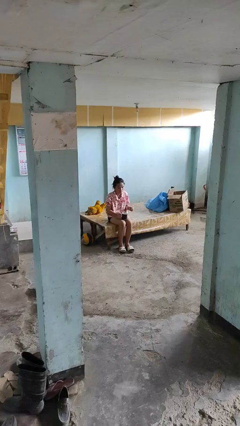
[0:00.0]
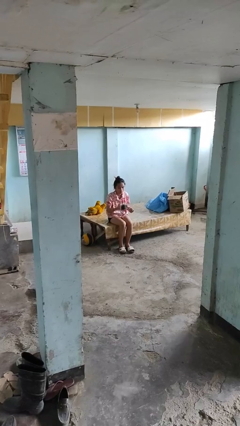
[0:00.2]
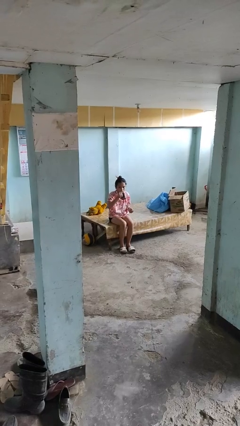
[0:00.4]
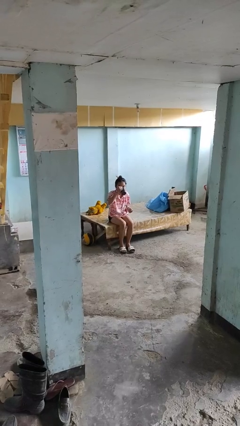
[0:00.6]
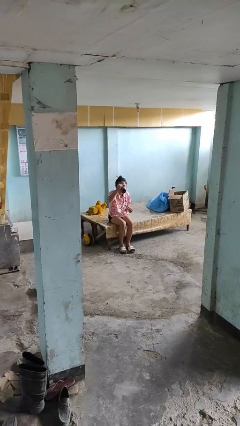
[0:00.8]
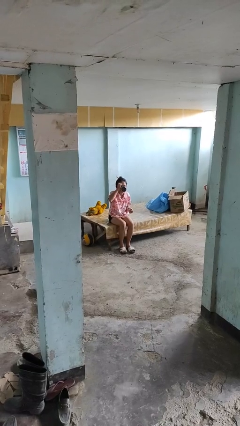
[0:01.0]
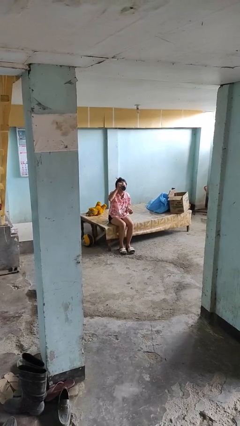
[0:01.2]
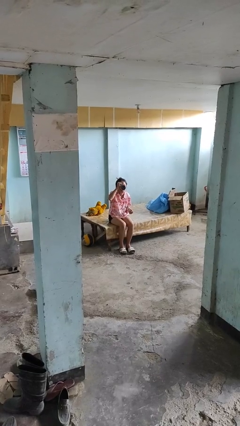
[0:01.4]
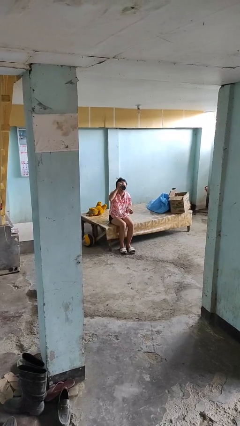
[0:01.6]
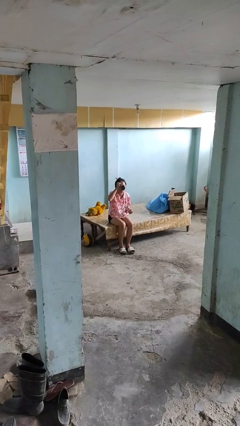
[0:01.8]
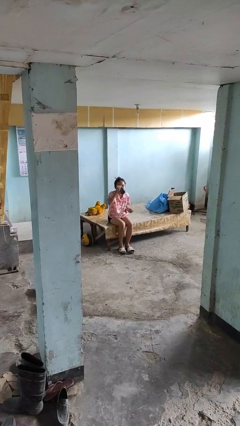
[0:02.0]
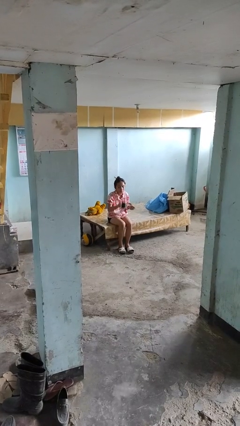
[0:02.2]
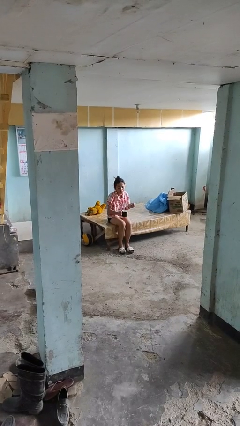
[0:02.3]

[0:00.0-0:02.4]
person drinks from mug

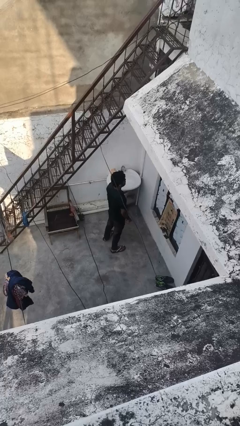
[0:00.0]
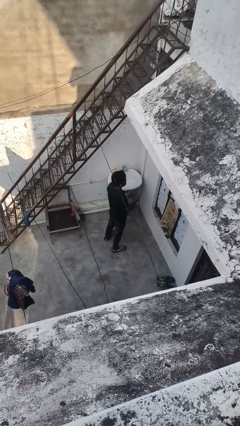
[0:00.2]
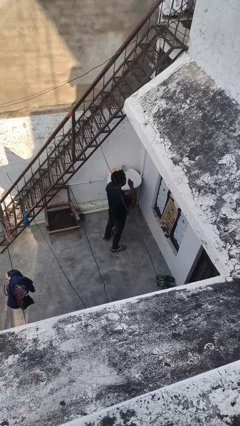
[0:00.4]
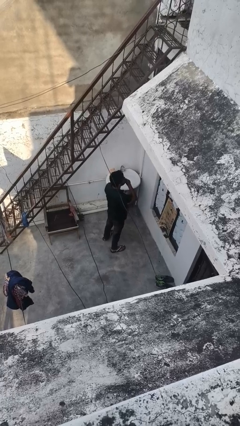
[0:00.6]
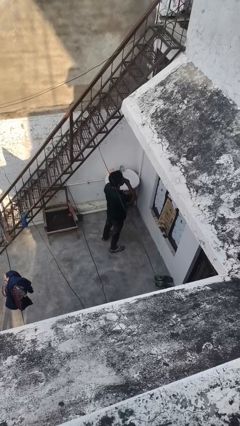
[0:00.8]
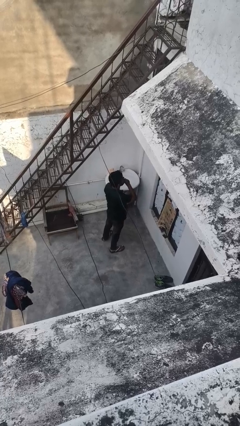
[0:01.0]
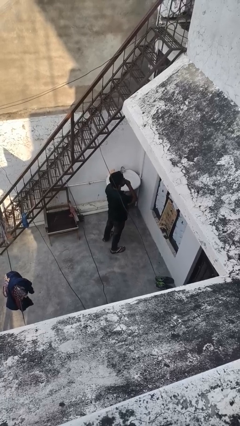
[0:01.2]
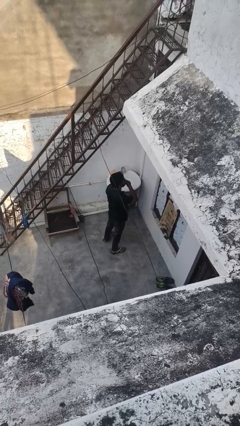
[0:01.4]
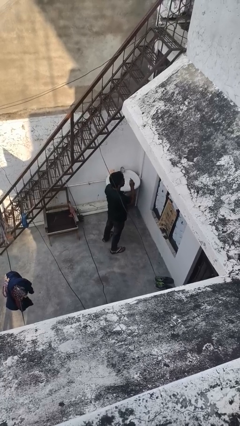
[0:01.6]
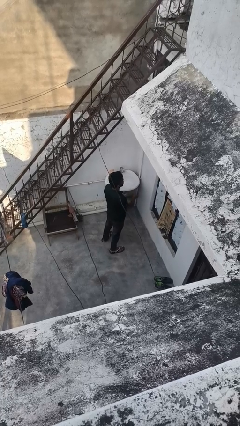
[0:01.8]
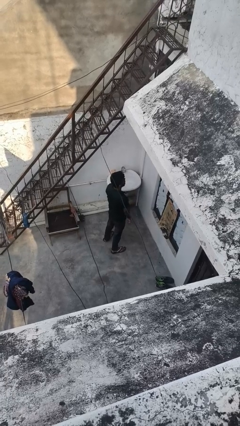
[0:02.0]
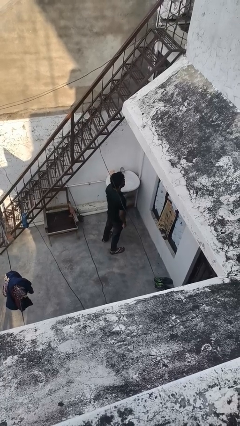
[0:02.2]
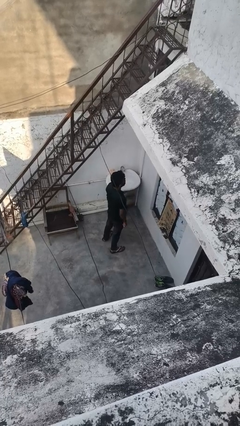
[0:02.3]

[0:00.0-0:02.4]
person gestures be quiet

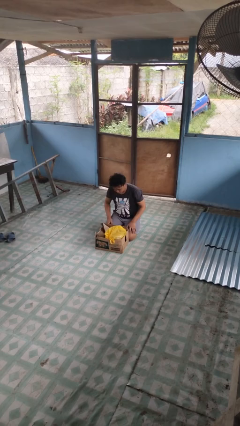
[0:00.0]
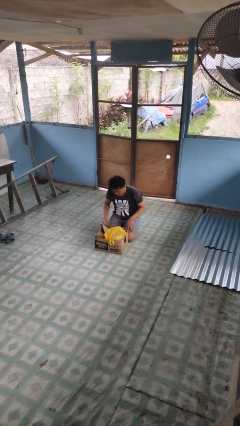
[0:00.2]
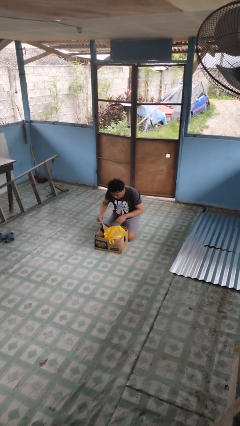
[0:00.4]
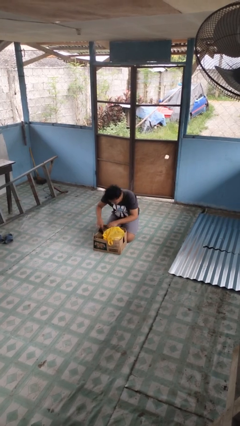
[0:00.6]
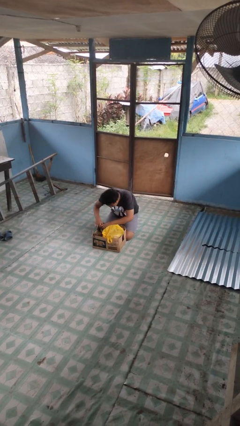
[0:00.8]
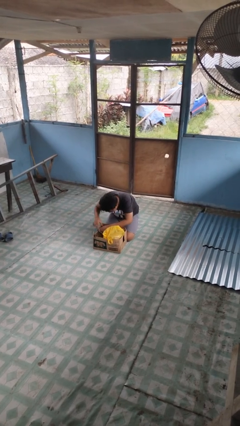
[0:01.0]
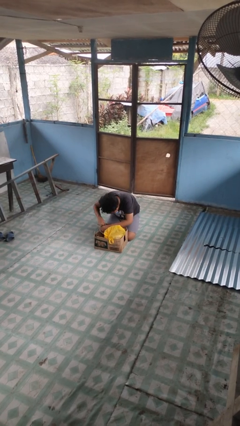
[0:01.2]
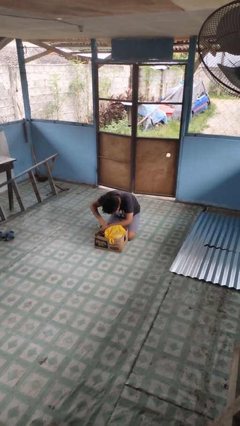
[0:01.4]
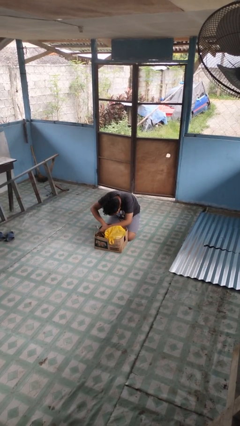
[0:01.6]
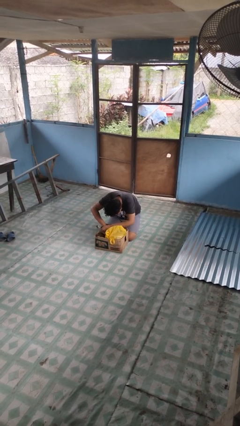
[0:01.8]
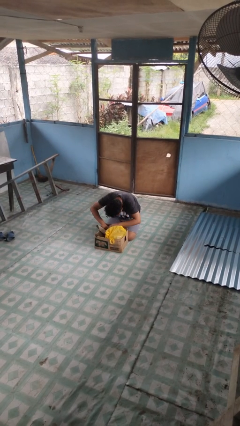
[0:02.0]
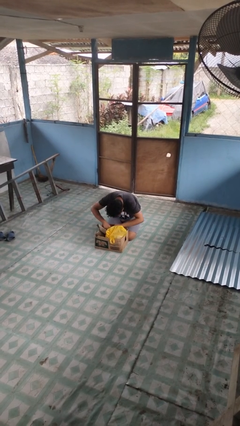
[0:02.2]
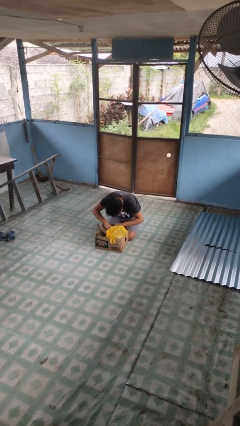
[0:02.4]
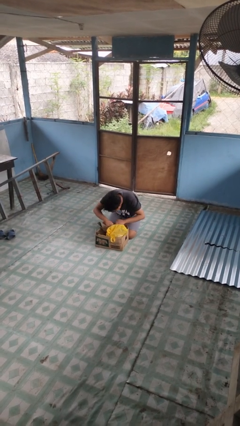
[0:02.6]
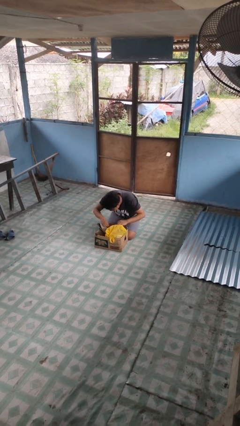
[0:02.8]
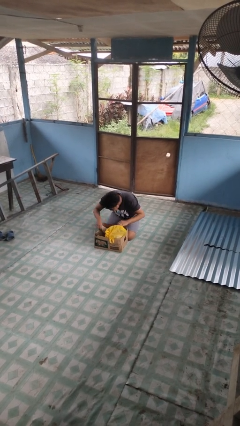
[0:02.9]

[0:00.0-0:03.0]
person searches in box

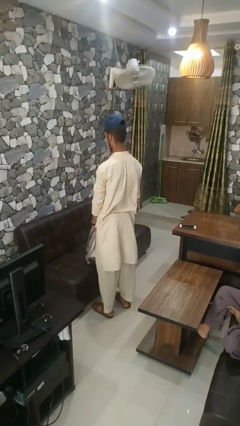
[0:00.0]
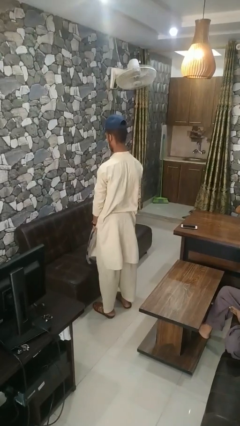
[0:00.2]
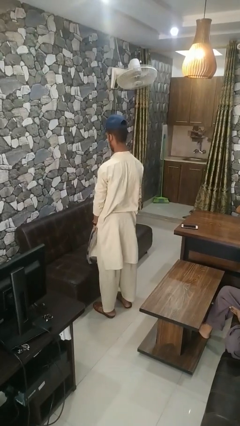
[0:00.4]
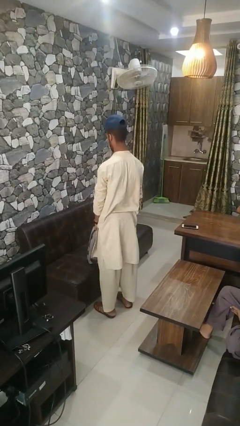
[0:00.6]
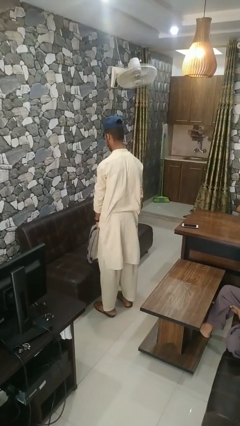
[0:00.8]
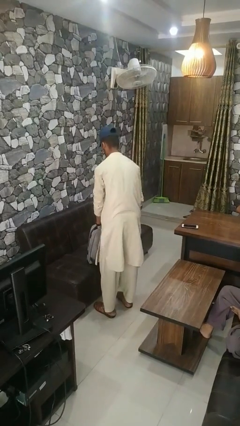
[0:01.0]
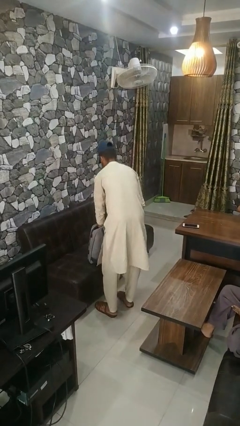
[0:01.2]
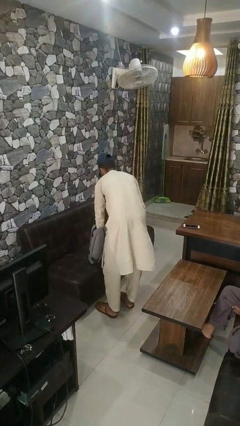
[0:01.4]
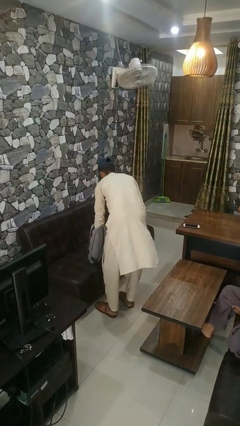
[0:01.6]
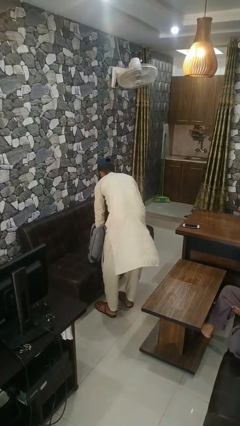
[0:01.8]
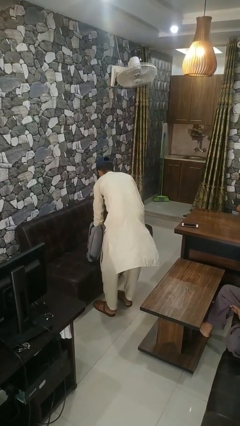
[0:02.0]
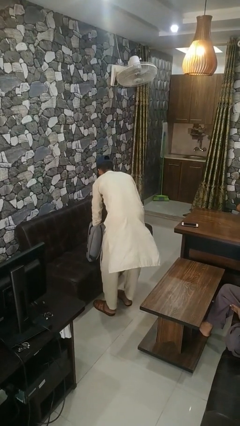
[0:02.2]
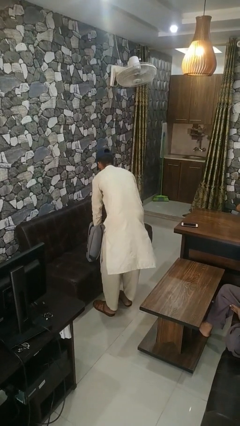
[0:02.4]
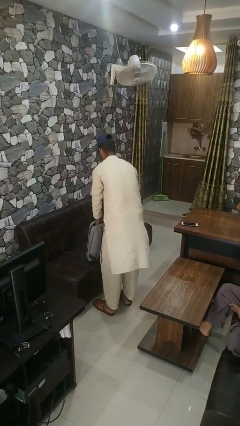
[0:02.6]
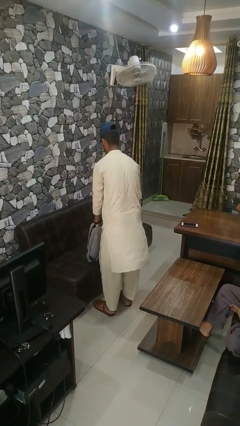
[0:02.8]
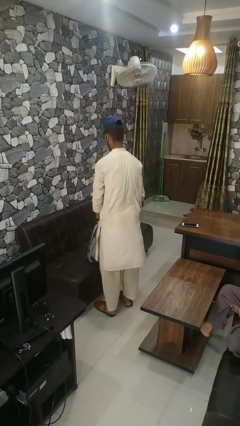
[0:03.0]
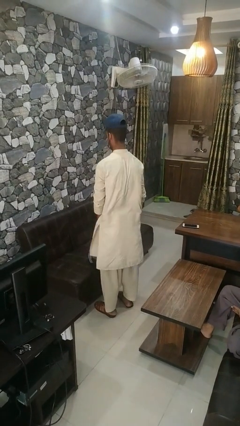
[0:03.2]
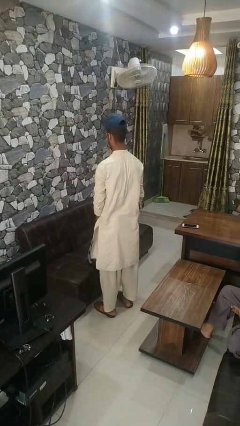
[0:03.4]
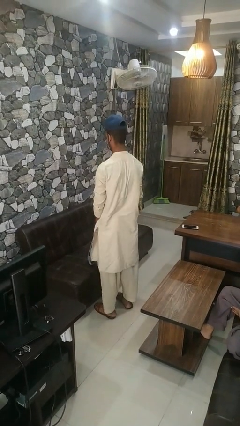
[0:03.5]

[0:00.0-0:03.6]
person searches in bag

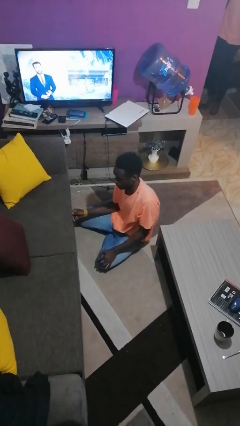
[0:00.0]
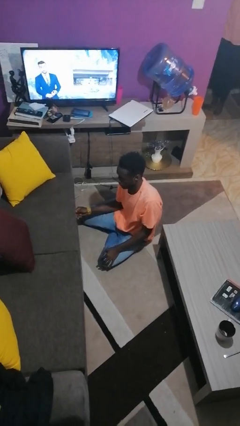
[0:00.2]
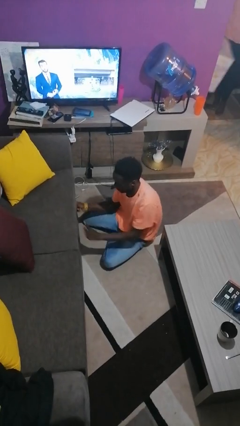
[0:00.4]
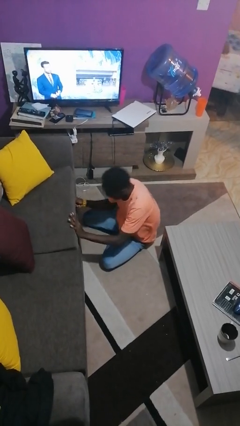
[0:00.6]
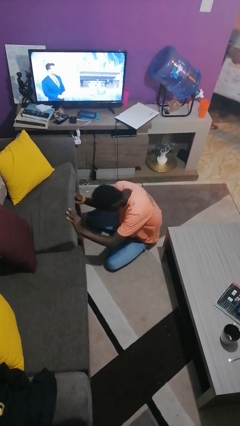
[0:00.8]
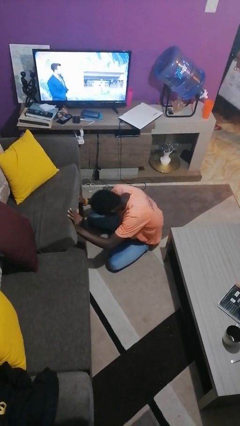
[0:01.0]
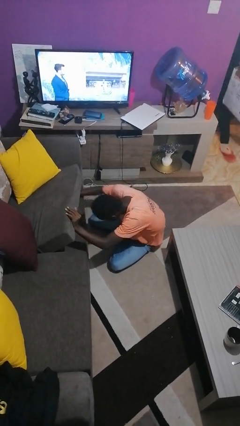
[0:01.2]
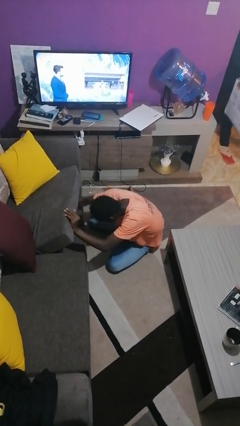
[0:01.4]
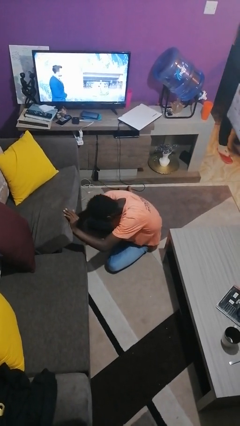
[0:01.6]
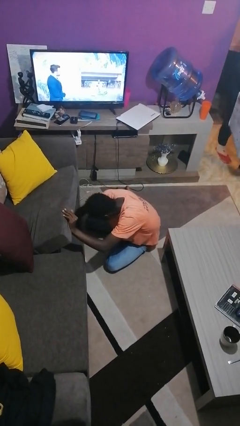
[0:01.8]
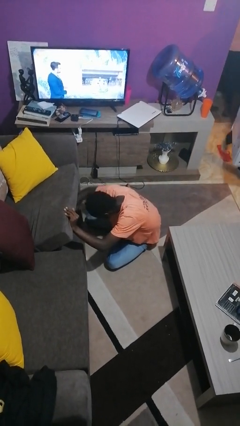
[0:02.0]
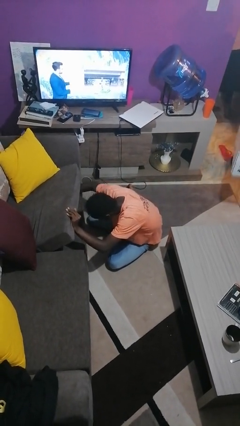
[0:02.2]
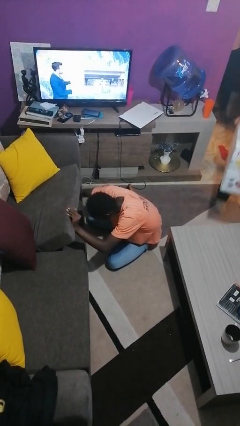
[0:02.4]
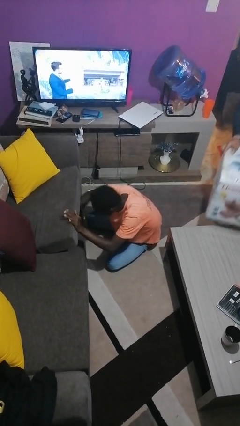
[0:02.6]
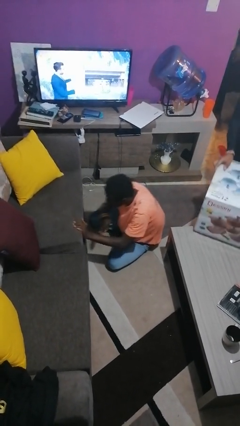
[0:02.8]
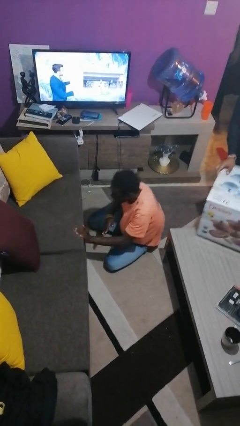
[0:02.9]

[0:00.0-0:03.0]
person searches under couch

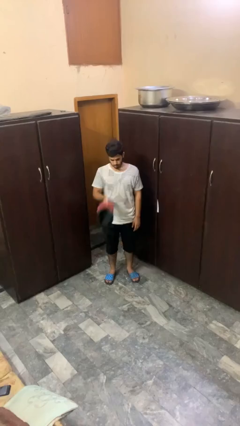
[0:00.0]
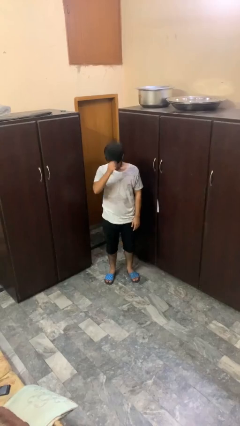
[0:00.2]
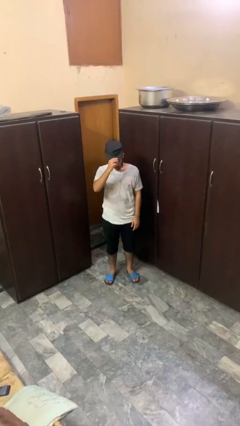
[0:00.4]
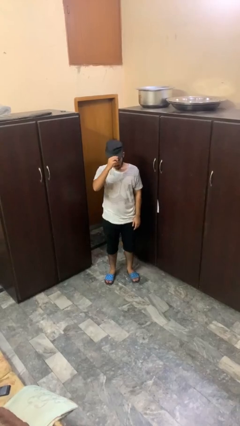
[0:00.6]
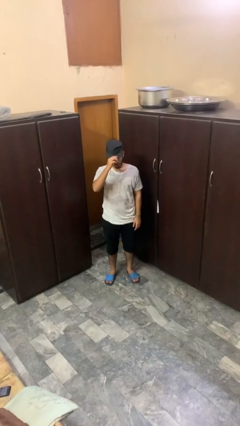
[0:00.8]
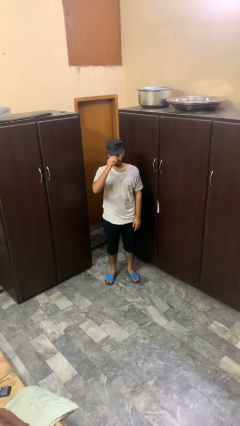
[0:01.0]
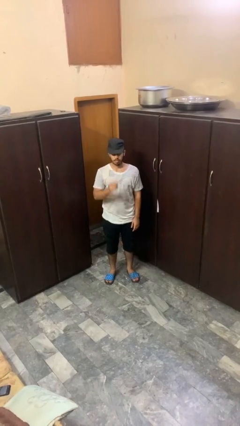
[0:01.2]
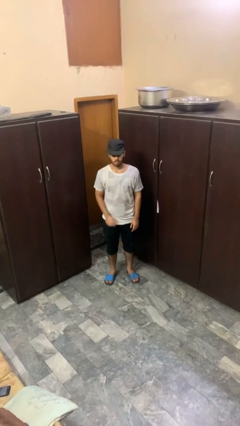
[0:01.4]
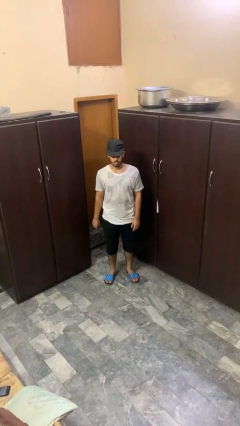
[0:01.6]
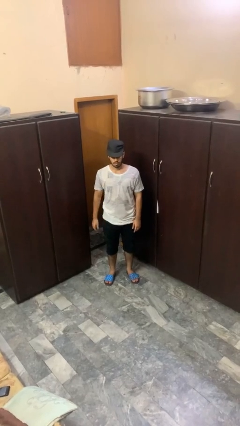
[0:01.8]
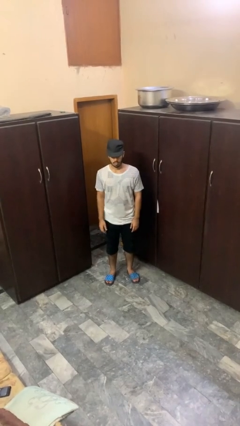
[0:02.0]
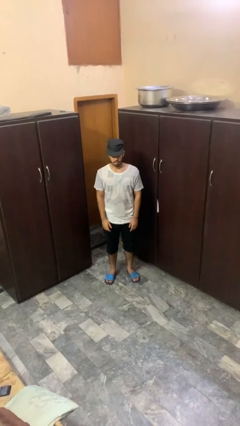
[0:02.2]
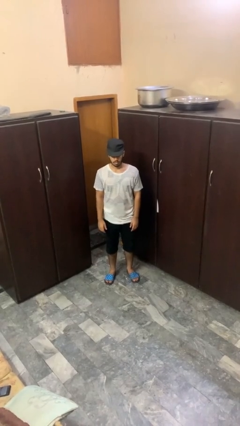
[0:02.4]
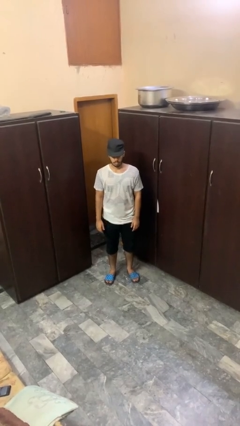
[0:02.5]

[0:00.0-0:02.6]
person puts on hat

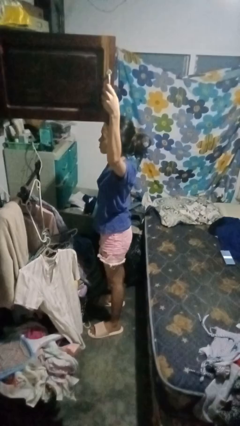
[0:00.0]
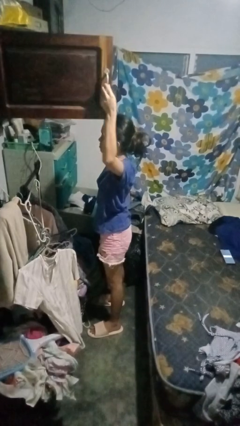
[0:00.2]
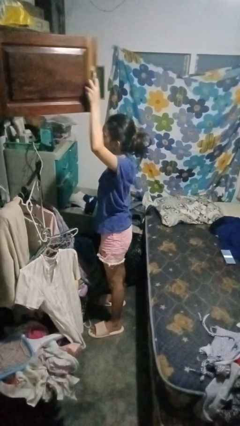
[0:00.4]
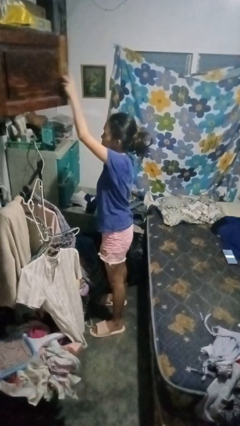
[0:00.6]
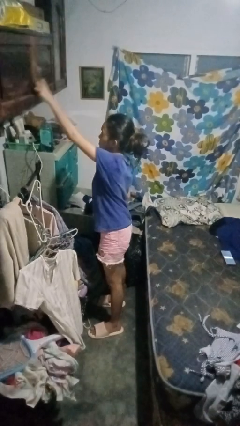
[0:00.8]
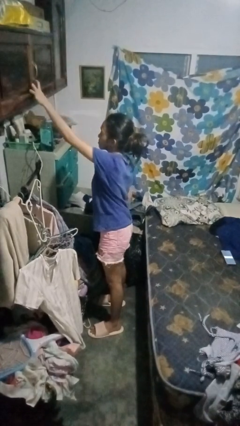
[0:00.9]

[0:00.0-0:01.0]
person closes closet door
